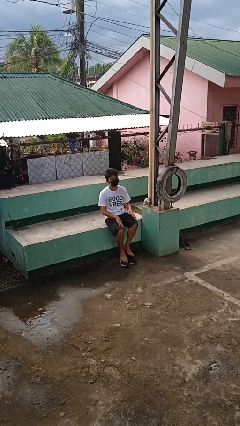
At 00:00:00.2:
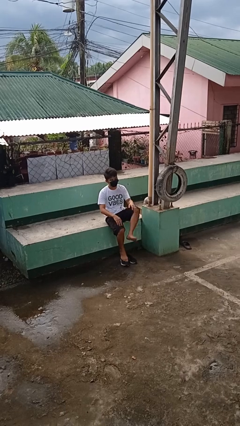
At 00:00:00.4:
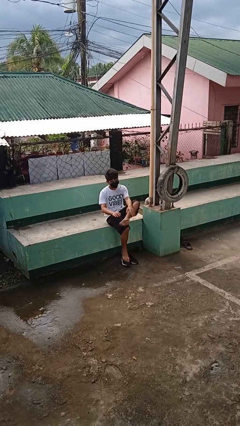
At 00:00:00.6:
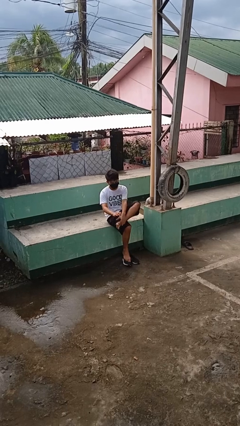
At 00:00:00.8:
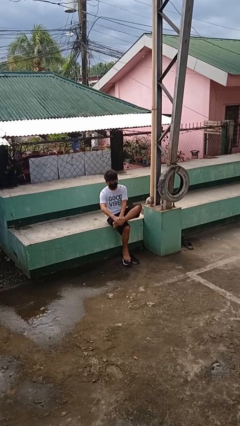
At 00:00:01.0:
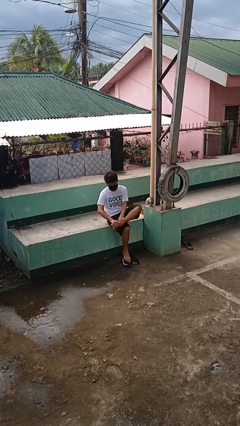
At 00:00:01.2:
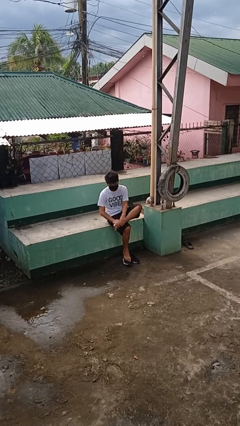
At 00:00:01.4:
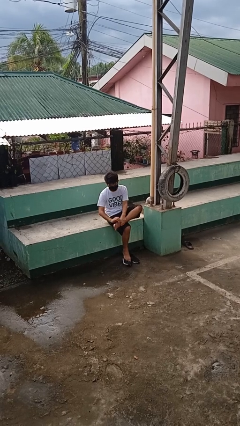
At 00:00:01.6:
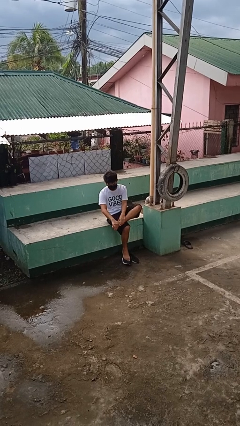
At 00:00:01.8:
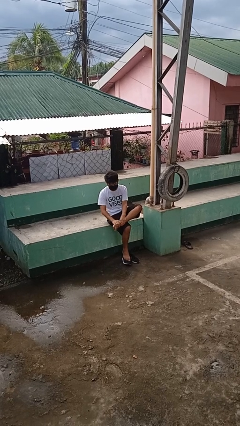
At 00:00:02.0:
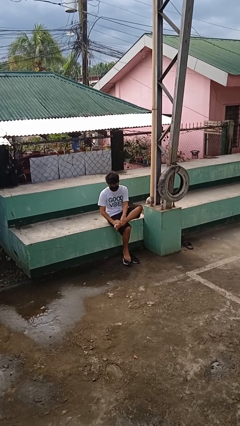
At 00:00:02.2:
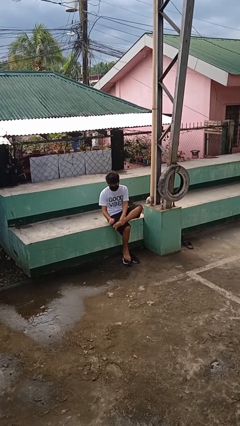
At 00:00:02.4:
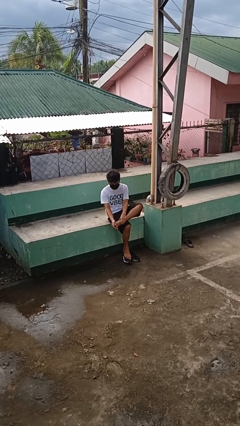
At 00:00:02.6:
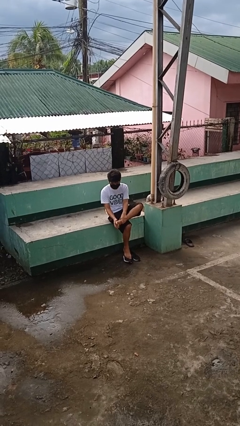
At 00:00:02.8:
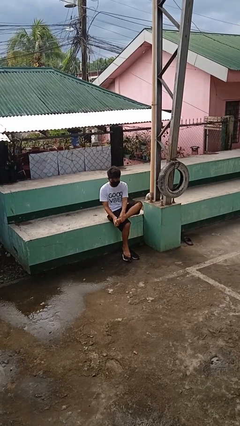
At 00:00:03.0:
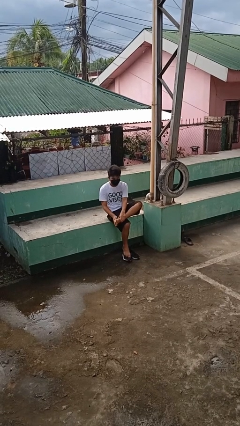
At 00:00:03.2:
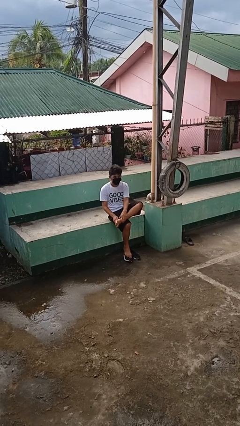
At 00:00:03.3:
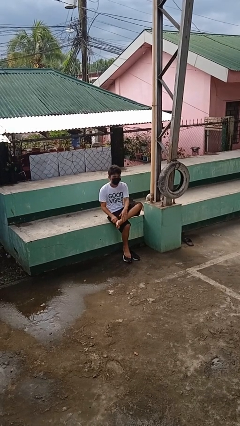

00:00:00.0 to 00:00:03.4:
person rubs foot

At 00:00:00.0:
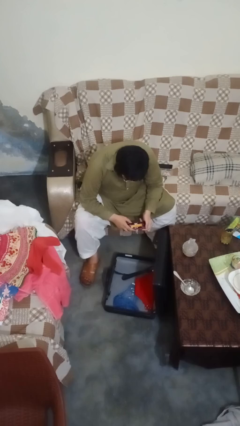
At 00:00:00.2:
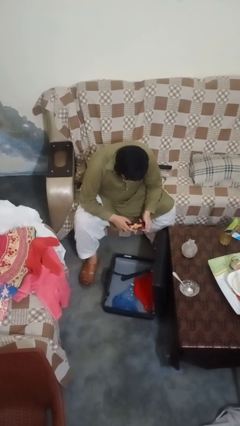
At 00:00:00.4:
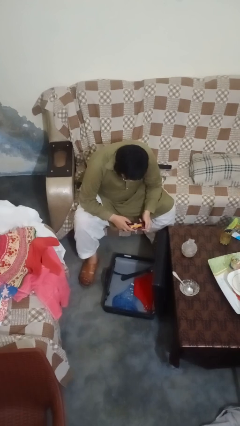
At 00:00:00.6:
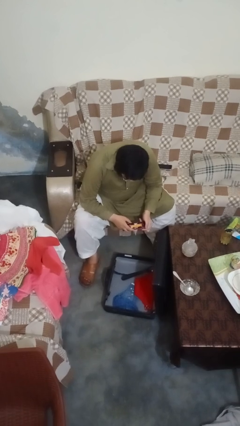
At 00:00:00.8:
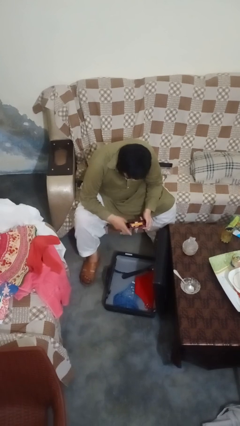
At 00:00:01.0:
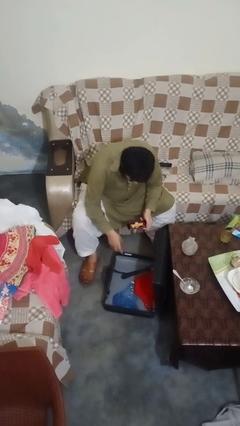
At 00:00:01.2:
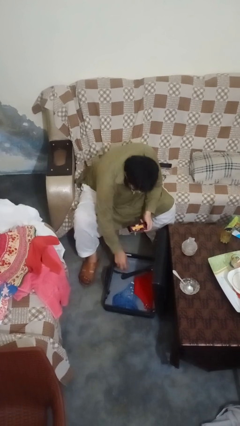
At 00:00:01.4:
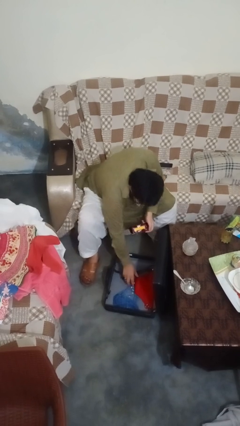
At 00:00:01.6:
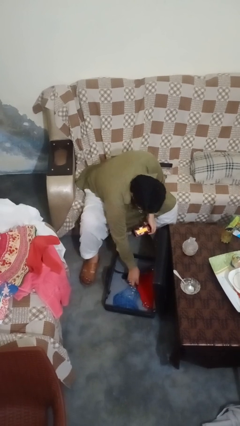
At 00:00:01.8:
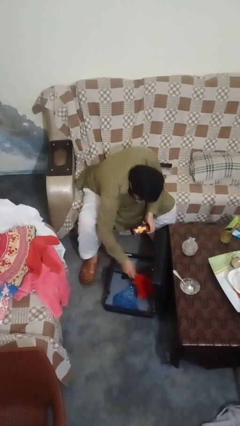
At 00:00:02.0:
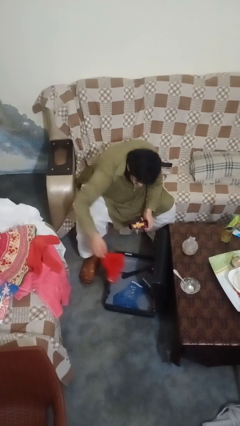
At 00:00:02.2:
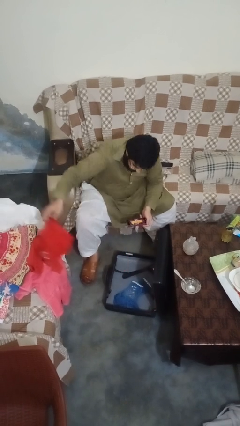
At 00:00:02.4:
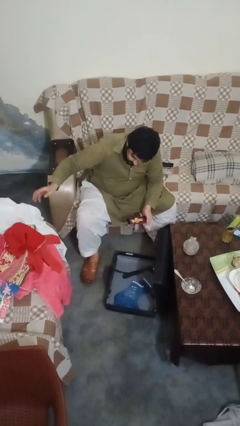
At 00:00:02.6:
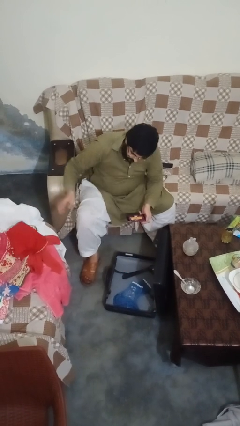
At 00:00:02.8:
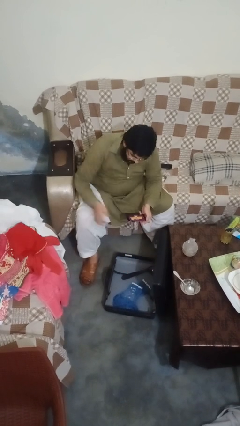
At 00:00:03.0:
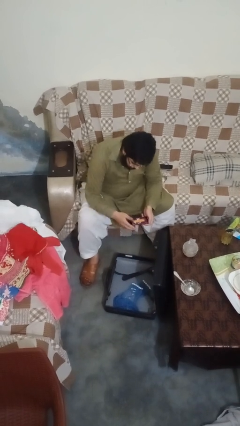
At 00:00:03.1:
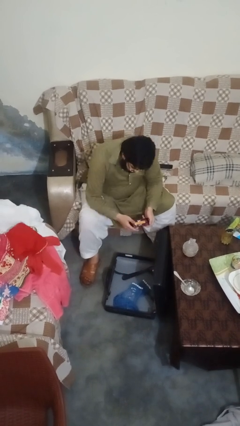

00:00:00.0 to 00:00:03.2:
person unloads clothes from suitcase

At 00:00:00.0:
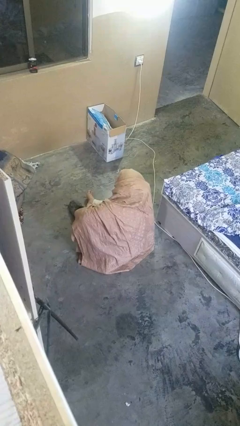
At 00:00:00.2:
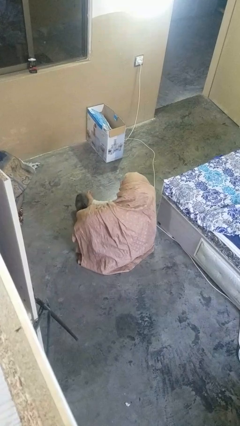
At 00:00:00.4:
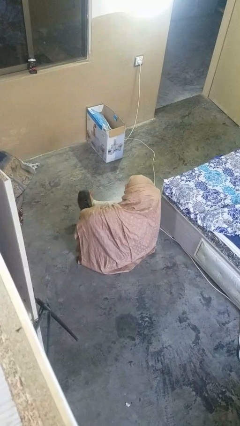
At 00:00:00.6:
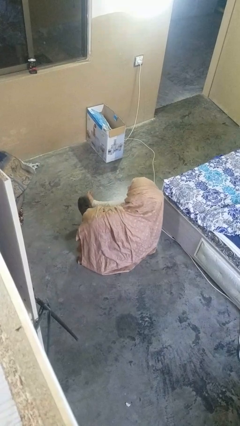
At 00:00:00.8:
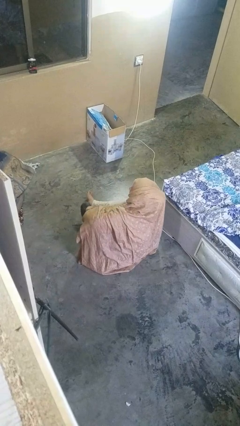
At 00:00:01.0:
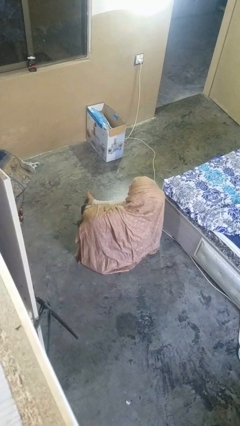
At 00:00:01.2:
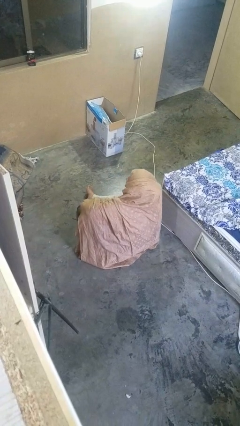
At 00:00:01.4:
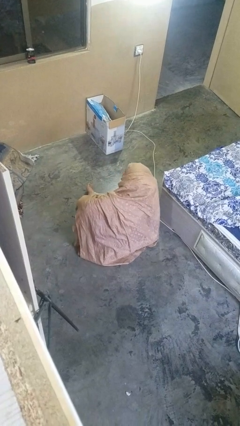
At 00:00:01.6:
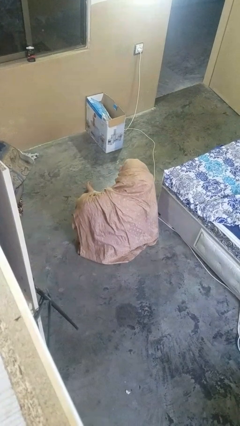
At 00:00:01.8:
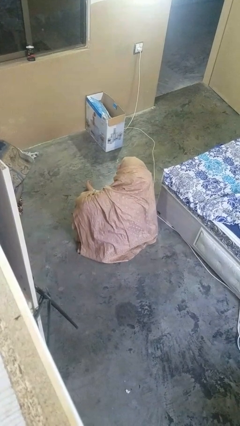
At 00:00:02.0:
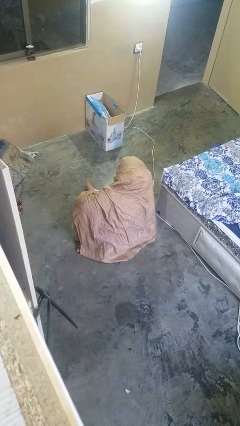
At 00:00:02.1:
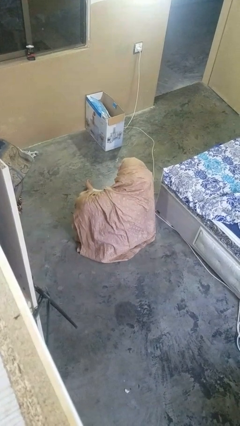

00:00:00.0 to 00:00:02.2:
person puts on shoes

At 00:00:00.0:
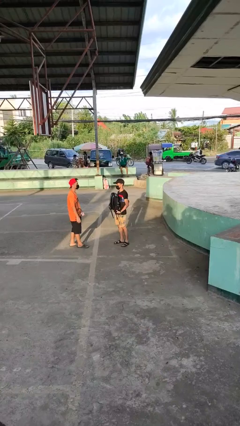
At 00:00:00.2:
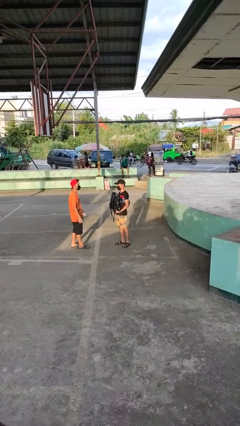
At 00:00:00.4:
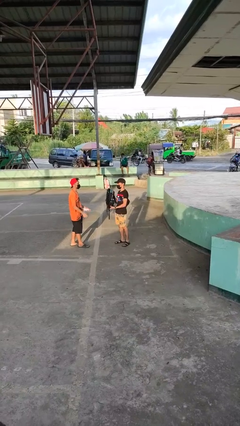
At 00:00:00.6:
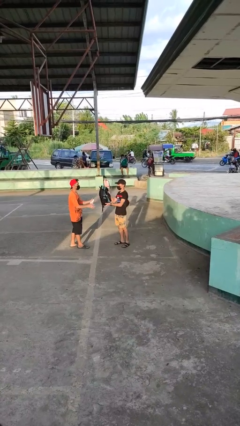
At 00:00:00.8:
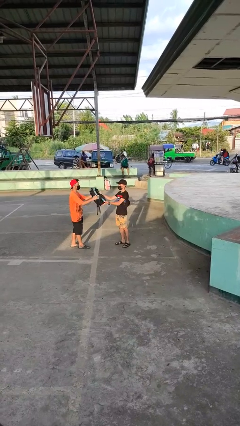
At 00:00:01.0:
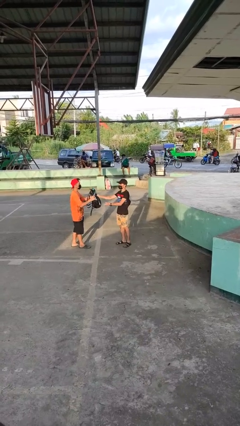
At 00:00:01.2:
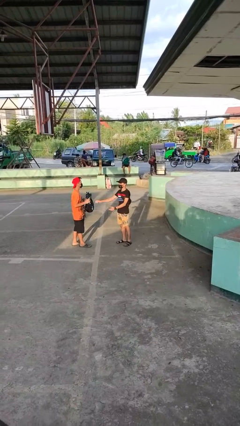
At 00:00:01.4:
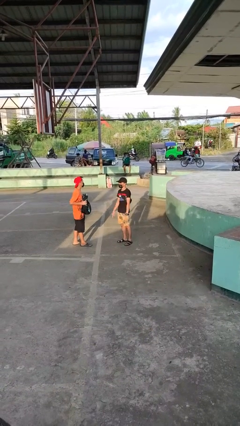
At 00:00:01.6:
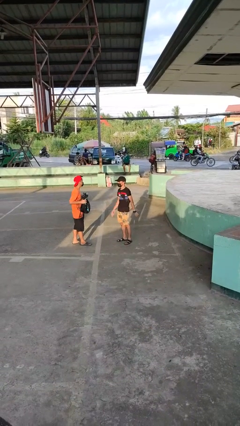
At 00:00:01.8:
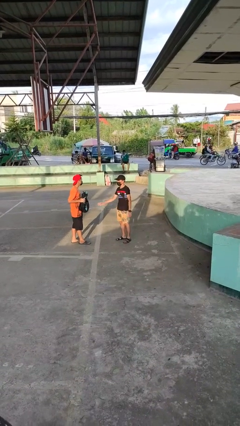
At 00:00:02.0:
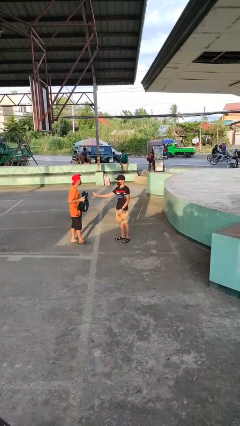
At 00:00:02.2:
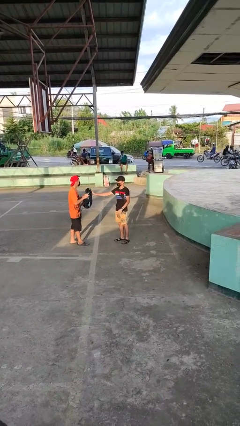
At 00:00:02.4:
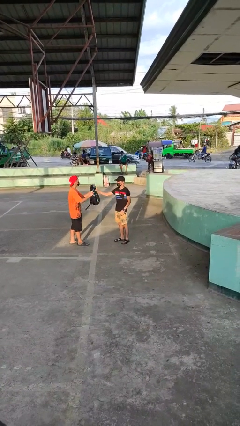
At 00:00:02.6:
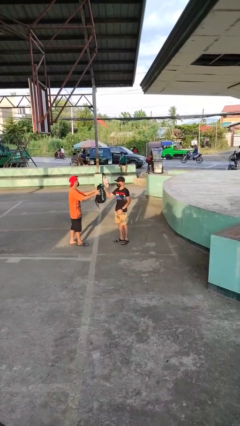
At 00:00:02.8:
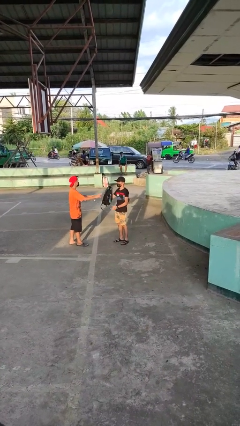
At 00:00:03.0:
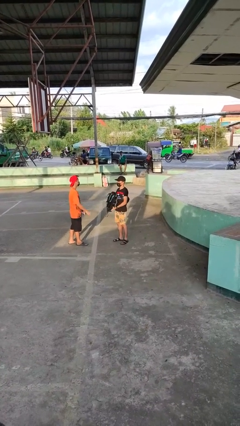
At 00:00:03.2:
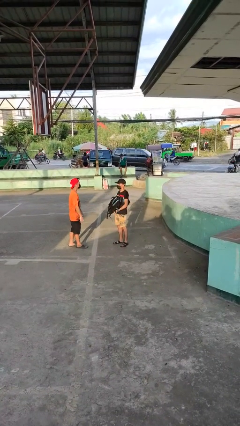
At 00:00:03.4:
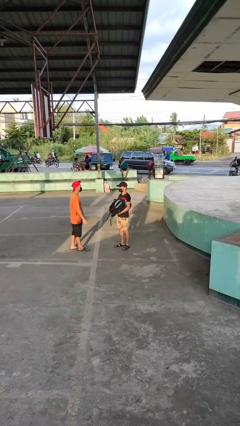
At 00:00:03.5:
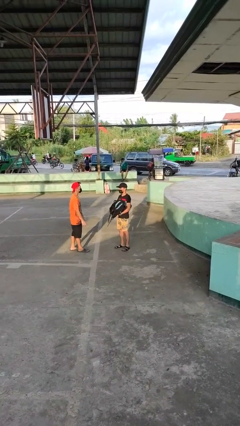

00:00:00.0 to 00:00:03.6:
person transfers object to person

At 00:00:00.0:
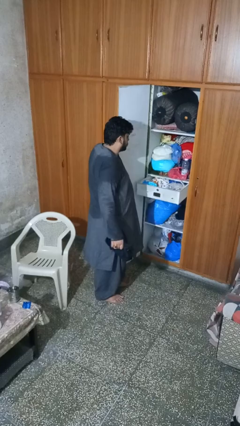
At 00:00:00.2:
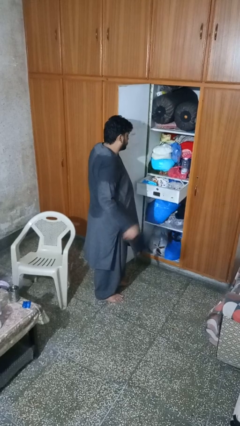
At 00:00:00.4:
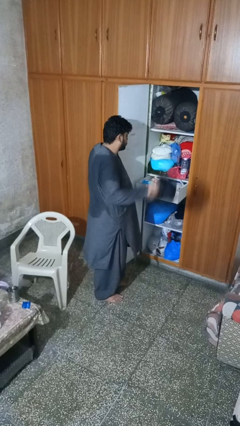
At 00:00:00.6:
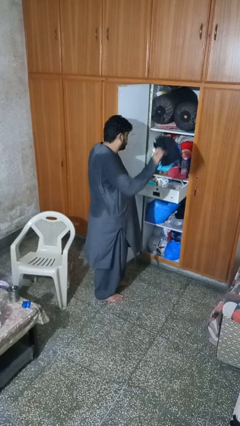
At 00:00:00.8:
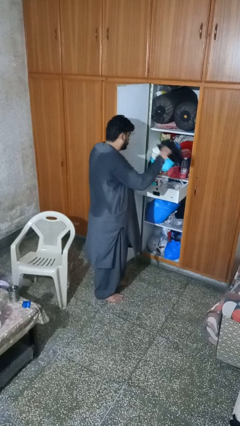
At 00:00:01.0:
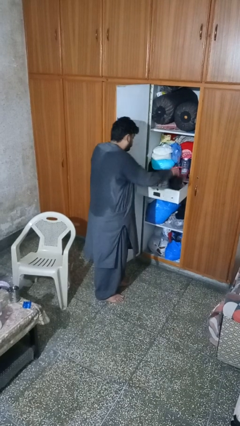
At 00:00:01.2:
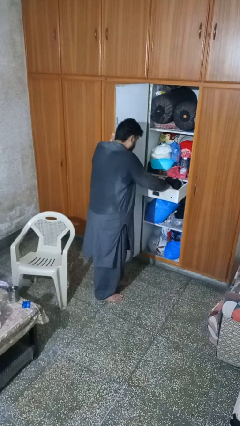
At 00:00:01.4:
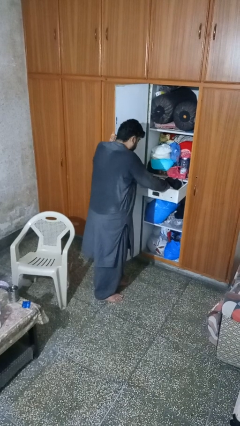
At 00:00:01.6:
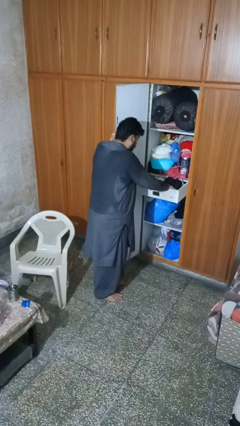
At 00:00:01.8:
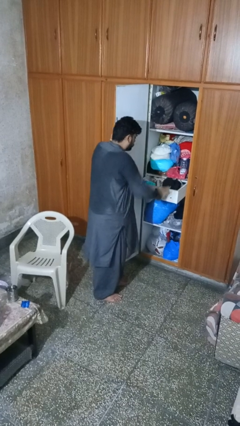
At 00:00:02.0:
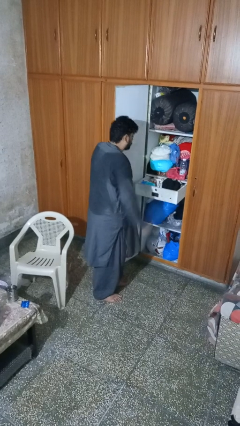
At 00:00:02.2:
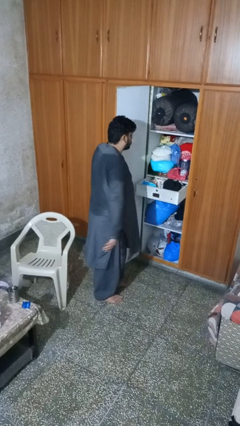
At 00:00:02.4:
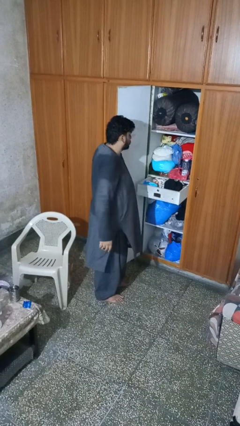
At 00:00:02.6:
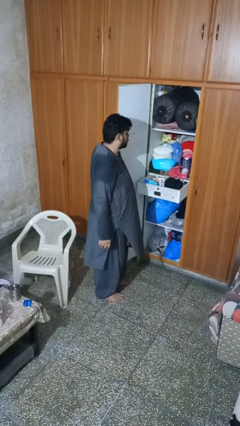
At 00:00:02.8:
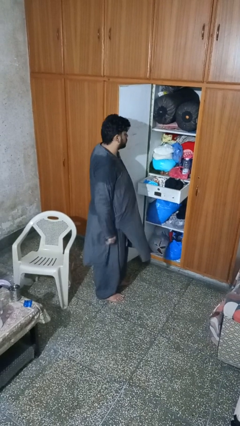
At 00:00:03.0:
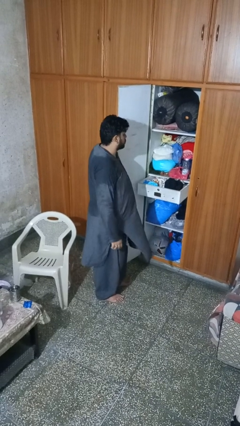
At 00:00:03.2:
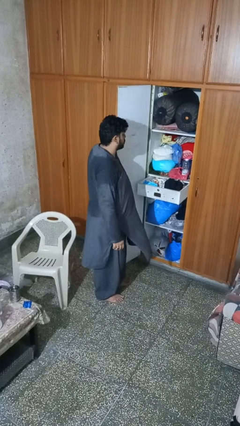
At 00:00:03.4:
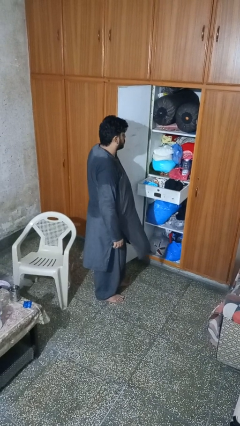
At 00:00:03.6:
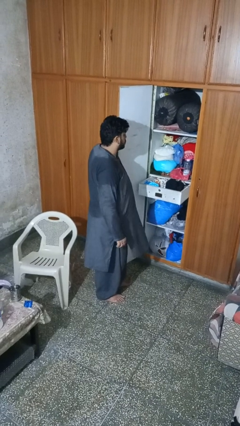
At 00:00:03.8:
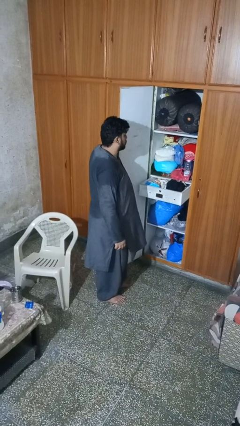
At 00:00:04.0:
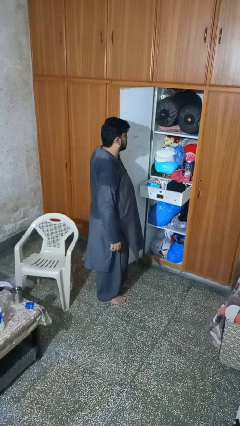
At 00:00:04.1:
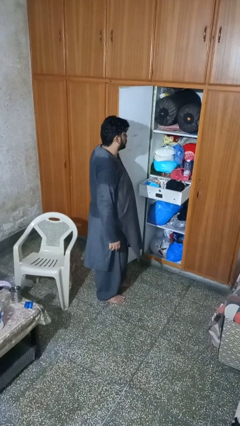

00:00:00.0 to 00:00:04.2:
person puts clothes into dresser

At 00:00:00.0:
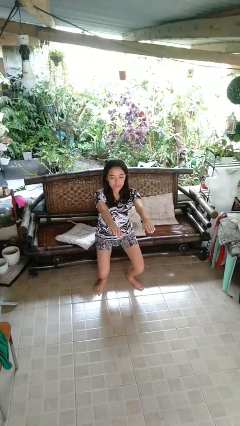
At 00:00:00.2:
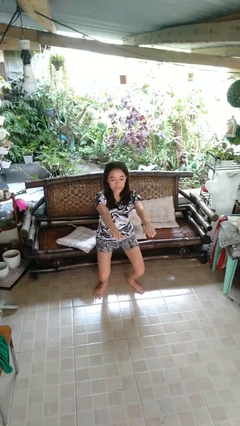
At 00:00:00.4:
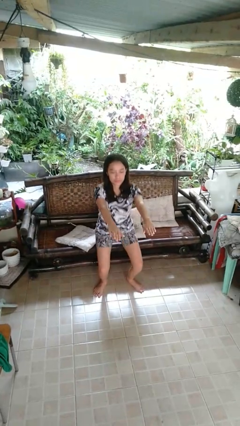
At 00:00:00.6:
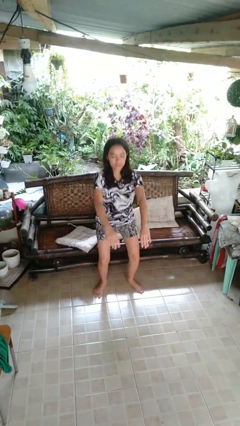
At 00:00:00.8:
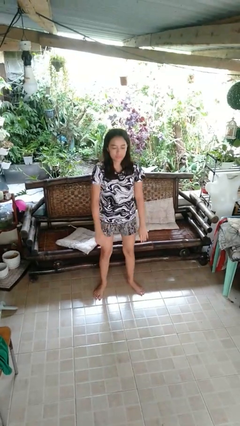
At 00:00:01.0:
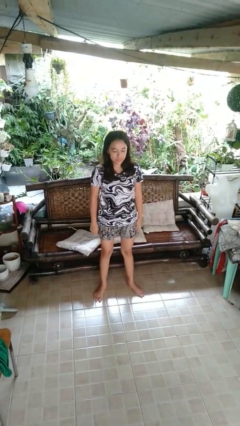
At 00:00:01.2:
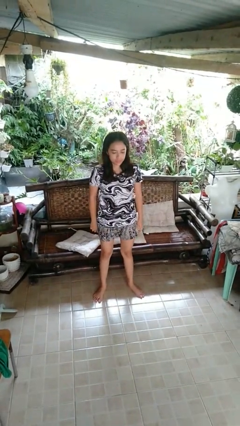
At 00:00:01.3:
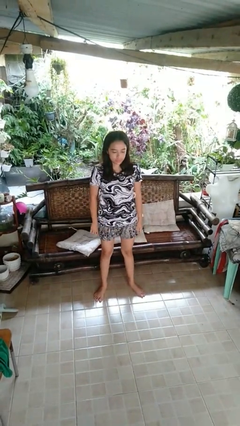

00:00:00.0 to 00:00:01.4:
person stands up
